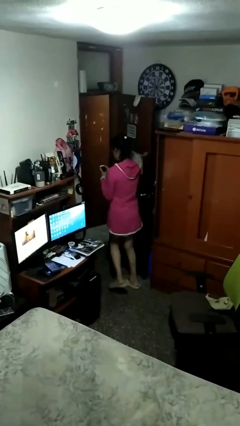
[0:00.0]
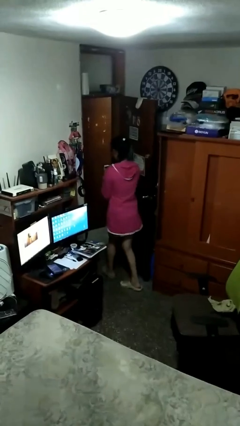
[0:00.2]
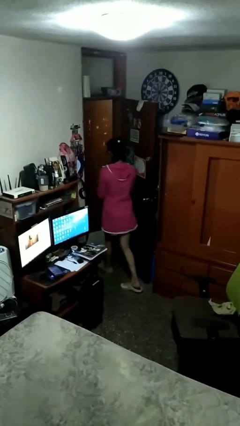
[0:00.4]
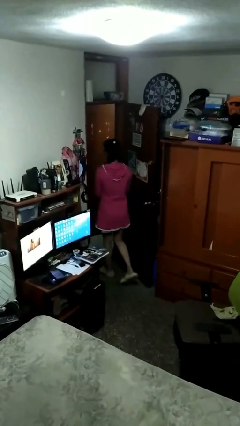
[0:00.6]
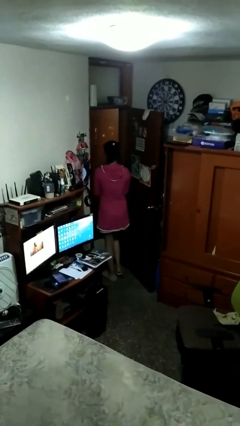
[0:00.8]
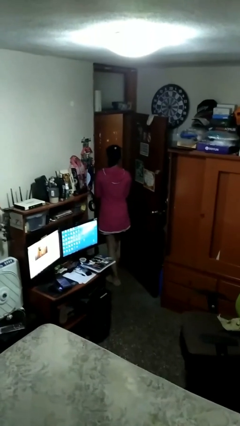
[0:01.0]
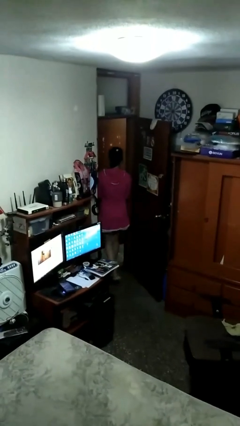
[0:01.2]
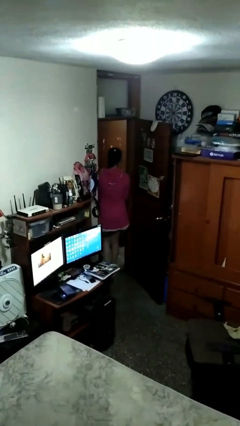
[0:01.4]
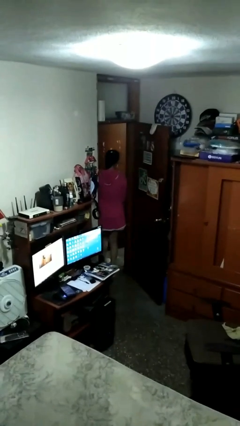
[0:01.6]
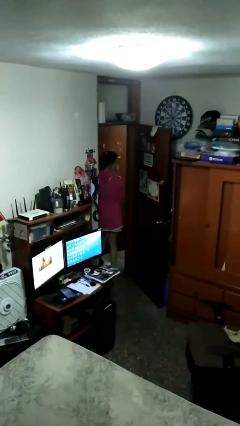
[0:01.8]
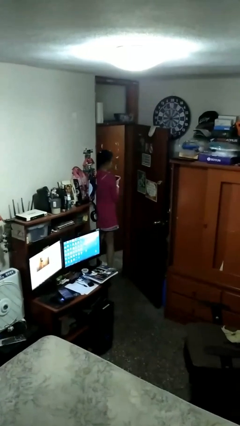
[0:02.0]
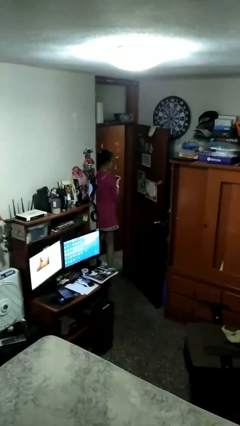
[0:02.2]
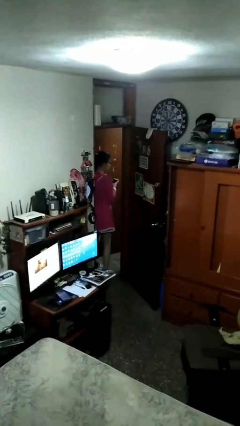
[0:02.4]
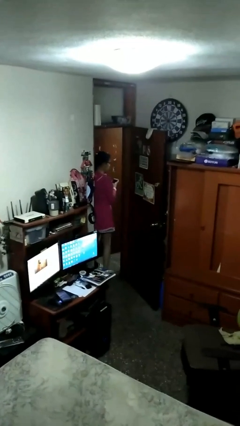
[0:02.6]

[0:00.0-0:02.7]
person exits scene through structure

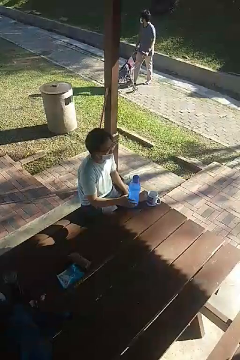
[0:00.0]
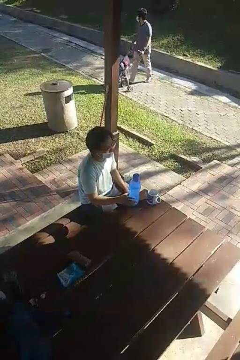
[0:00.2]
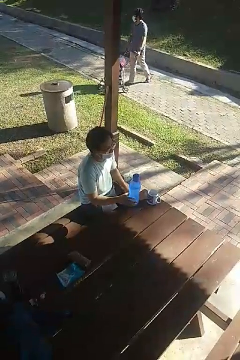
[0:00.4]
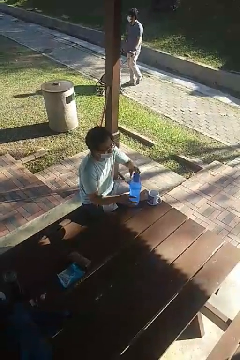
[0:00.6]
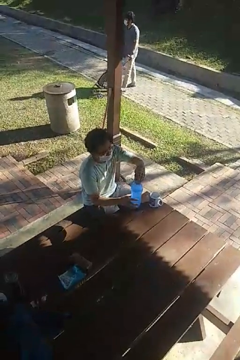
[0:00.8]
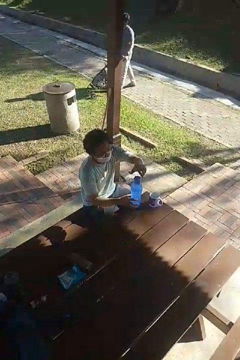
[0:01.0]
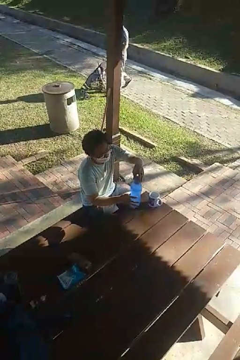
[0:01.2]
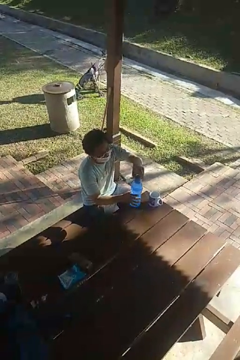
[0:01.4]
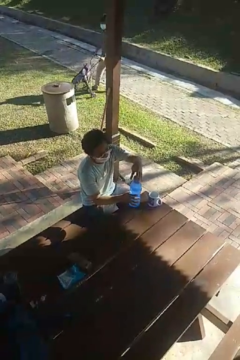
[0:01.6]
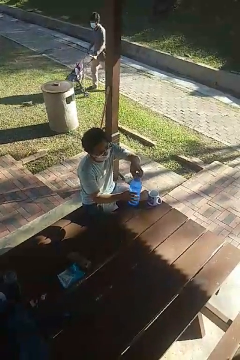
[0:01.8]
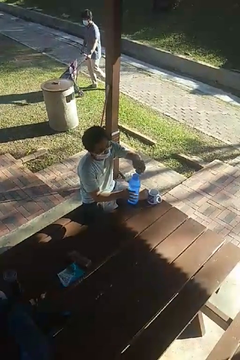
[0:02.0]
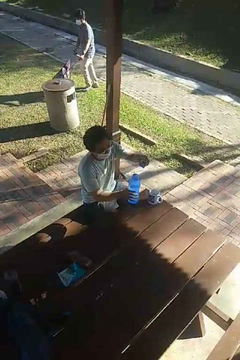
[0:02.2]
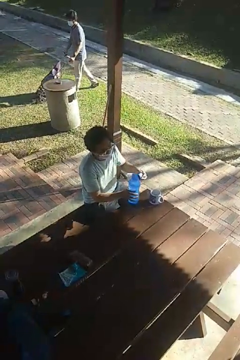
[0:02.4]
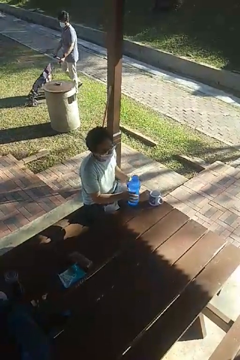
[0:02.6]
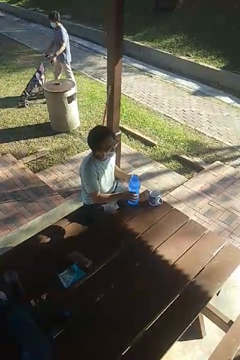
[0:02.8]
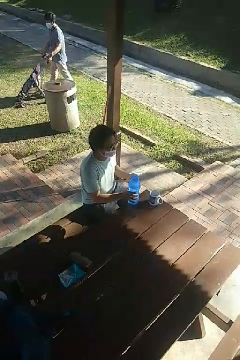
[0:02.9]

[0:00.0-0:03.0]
person unscrews lid from bottle

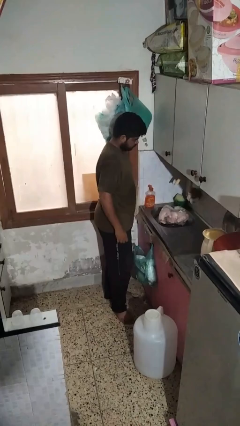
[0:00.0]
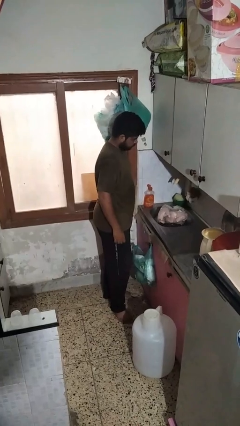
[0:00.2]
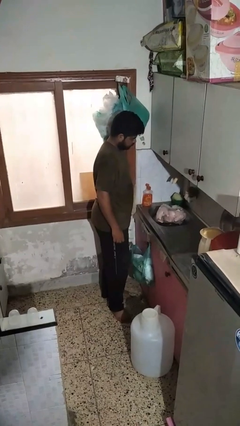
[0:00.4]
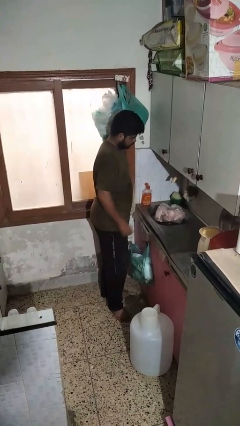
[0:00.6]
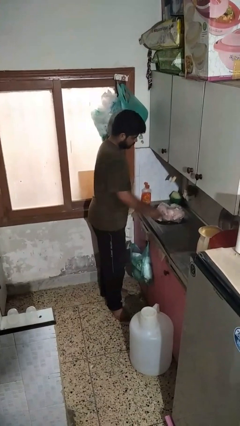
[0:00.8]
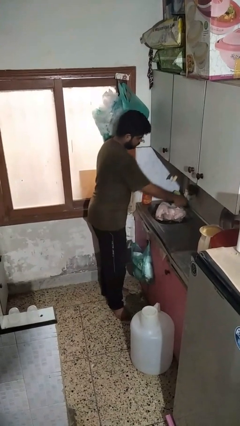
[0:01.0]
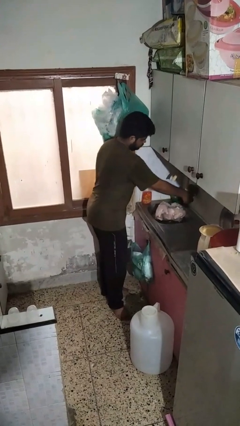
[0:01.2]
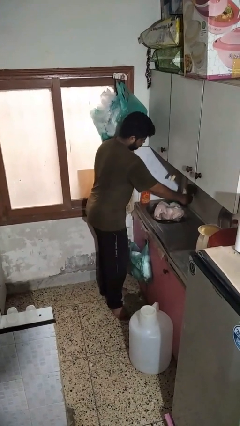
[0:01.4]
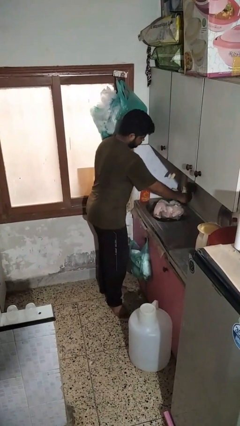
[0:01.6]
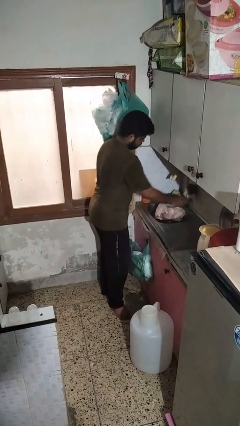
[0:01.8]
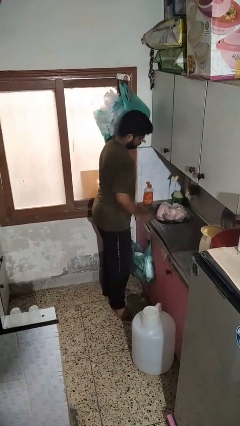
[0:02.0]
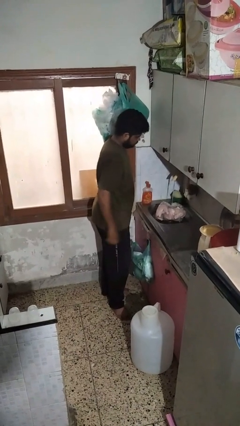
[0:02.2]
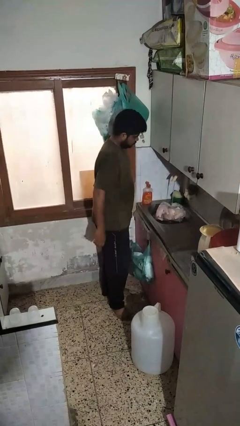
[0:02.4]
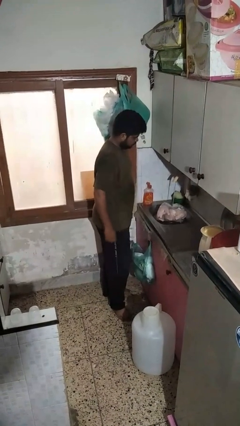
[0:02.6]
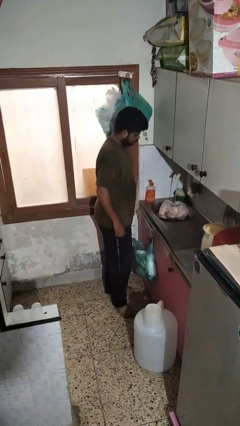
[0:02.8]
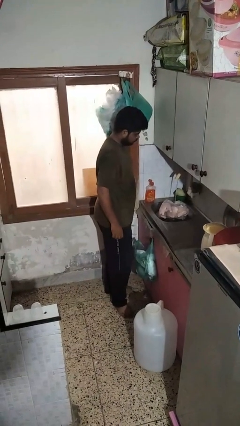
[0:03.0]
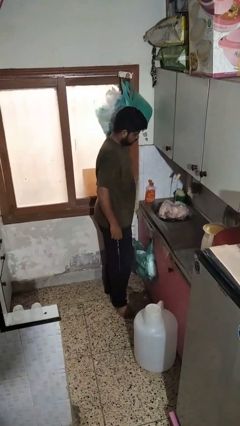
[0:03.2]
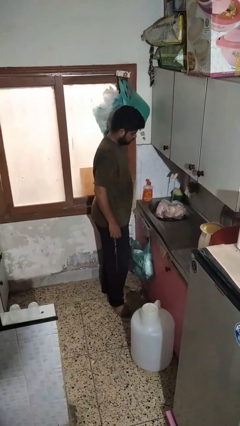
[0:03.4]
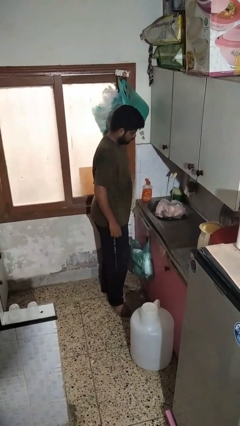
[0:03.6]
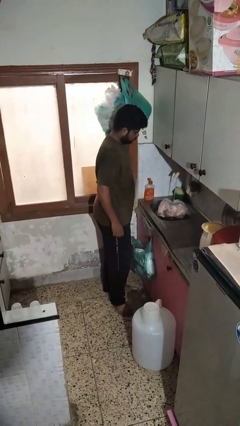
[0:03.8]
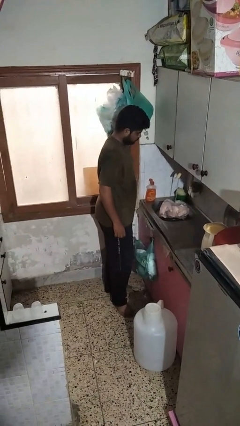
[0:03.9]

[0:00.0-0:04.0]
person turns on faucet

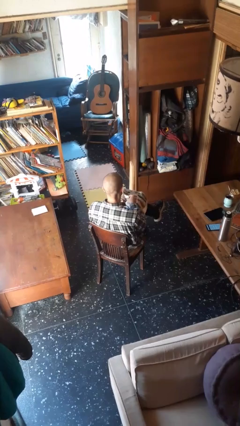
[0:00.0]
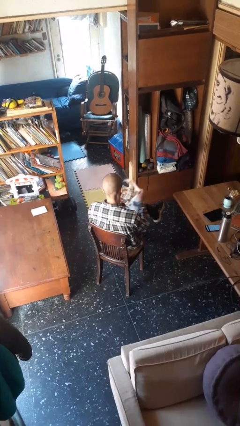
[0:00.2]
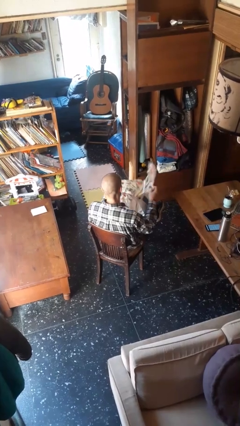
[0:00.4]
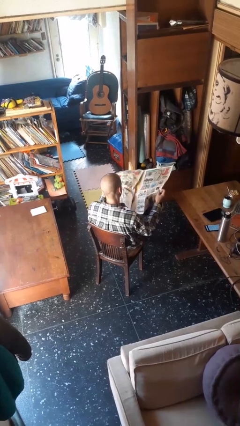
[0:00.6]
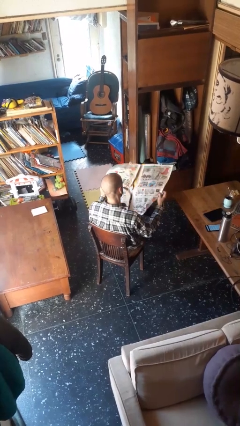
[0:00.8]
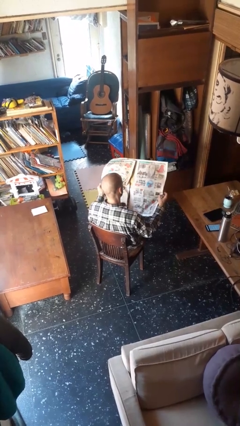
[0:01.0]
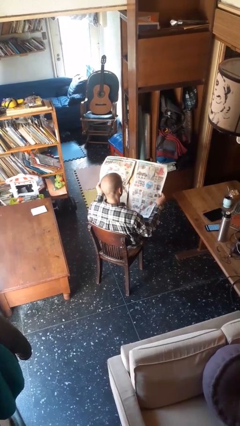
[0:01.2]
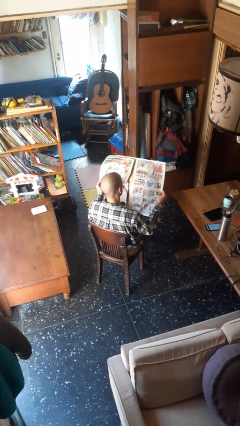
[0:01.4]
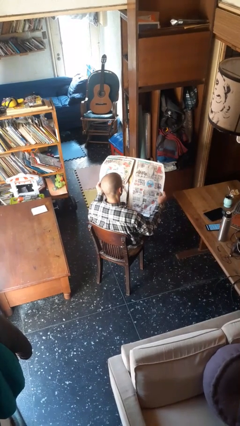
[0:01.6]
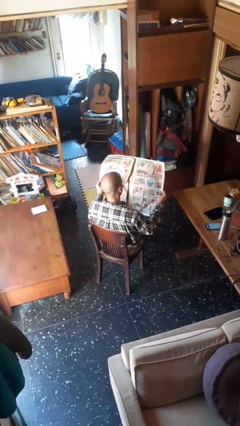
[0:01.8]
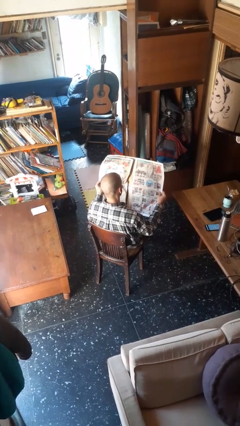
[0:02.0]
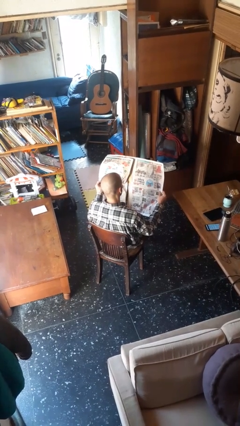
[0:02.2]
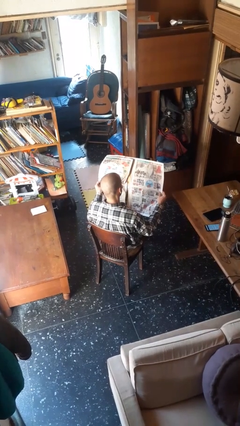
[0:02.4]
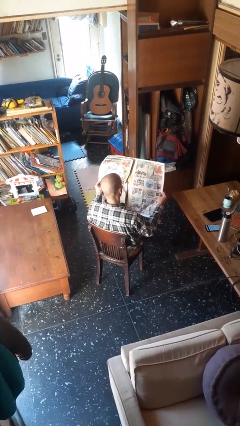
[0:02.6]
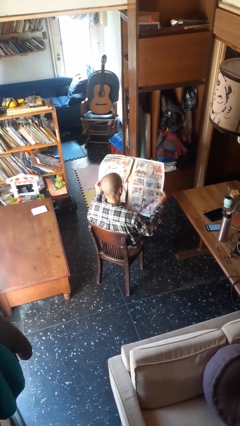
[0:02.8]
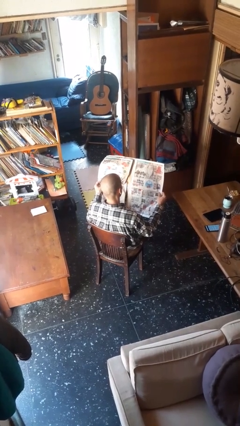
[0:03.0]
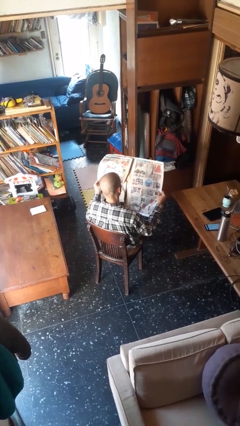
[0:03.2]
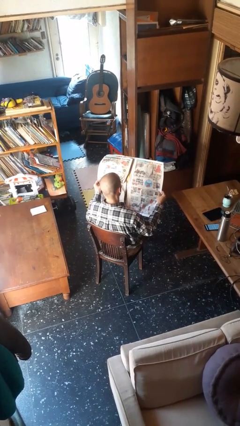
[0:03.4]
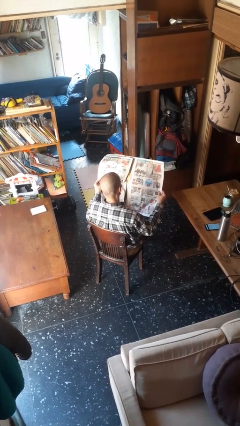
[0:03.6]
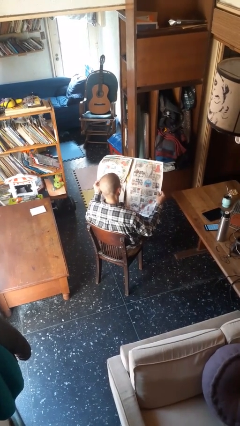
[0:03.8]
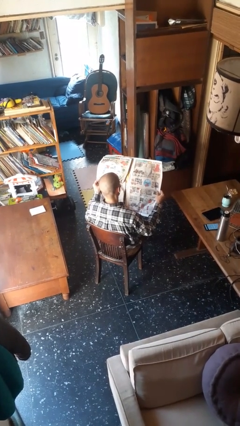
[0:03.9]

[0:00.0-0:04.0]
person reads newspaper

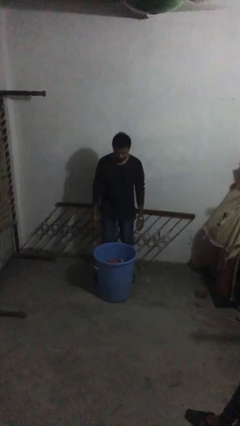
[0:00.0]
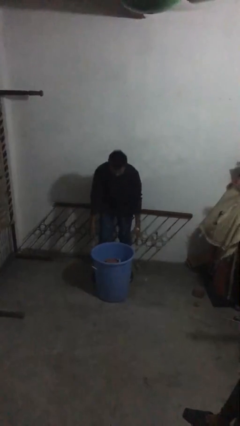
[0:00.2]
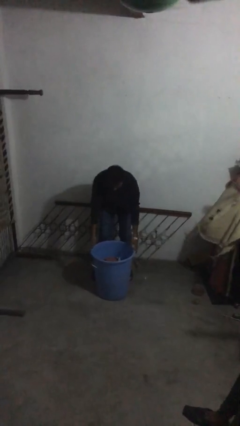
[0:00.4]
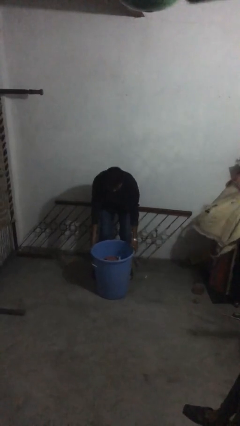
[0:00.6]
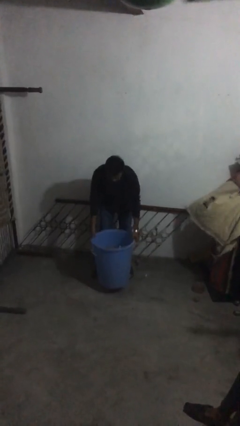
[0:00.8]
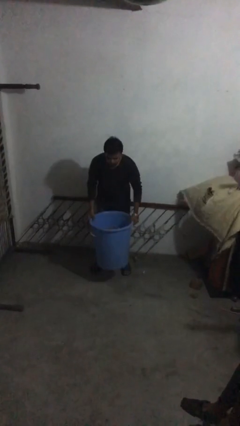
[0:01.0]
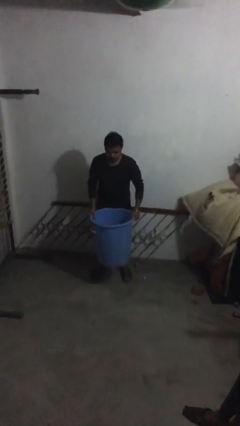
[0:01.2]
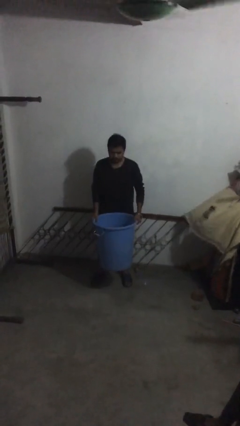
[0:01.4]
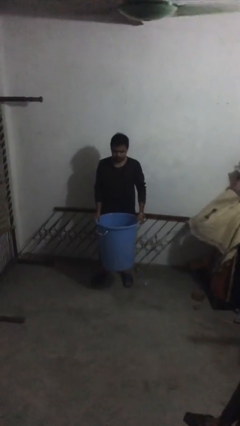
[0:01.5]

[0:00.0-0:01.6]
person picks up object from floor

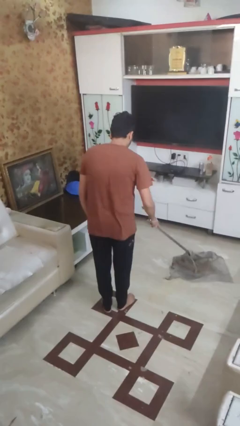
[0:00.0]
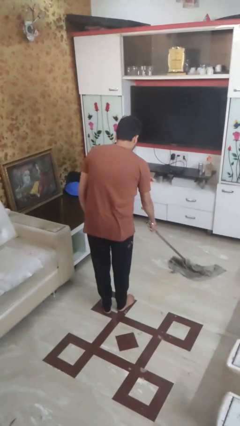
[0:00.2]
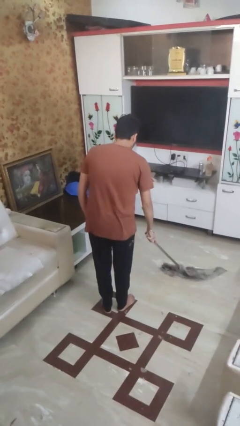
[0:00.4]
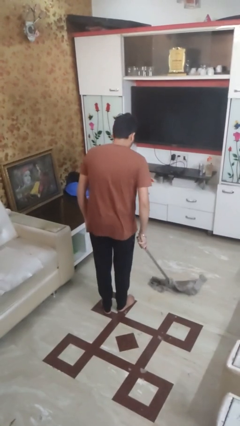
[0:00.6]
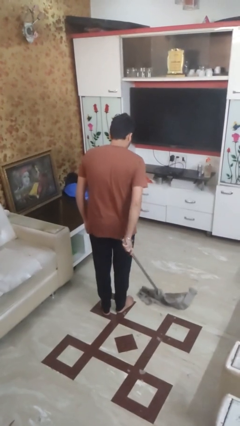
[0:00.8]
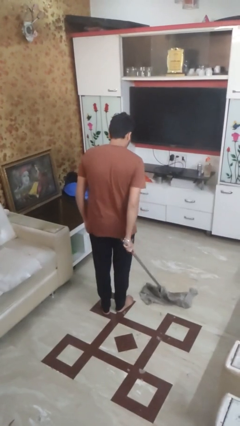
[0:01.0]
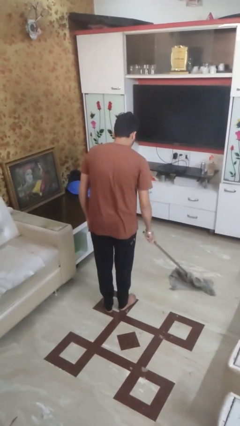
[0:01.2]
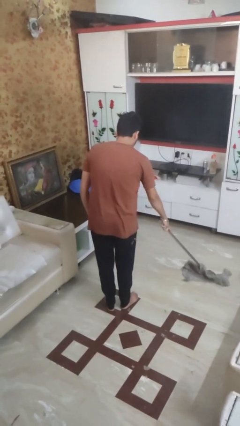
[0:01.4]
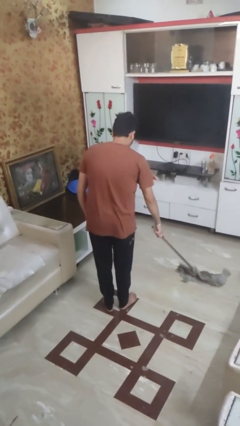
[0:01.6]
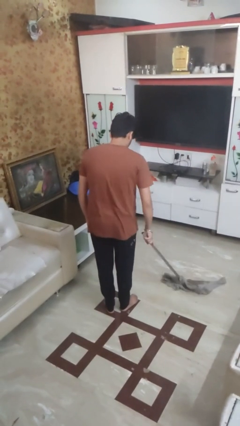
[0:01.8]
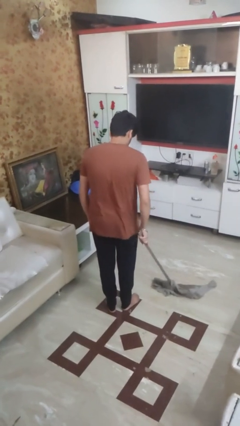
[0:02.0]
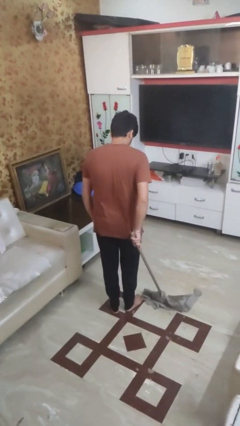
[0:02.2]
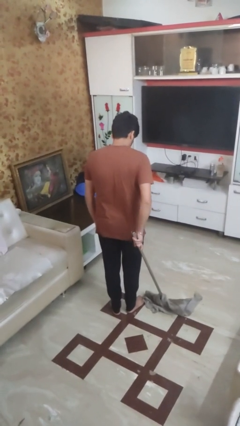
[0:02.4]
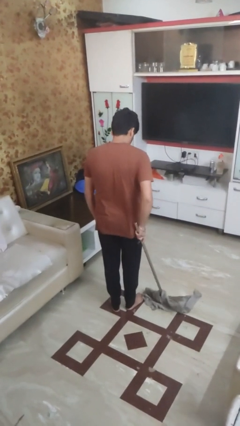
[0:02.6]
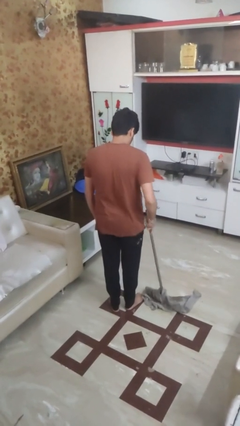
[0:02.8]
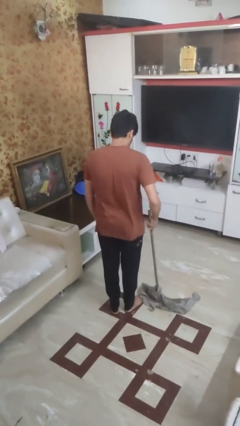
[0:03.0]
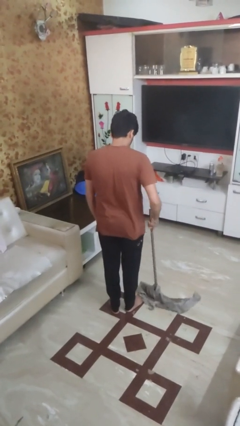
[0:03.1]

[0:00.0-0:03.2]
person mops
